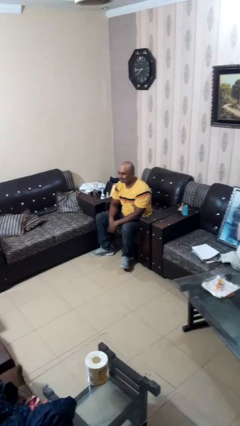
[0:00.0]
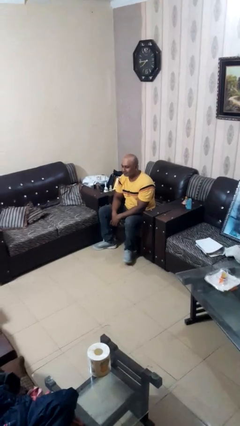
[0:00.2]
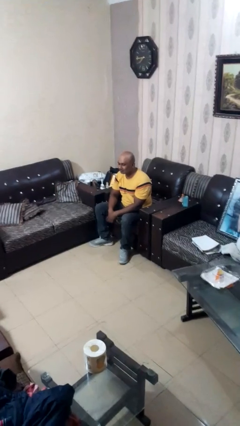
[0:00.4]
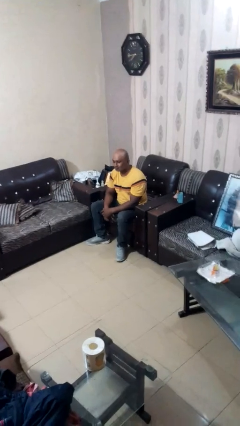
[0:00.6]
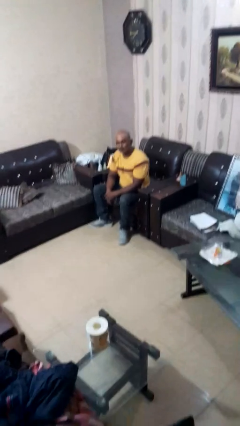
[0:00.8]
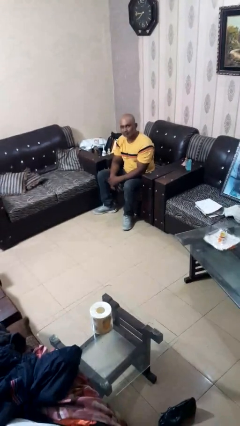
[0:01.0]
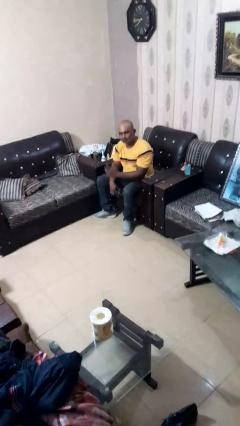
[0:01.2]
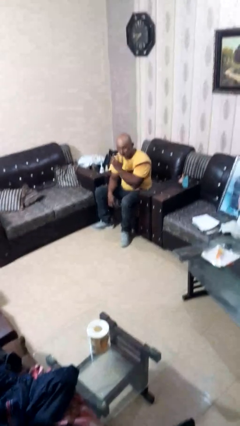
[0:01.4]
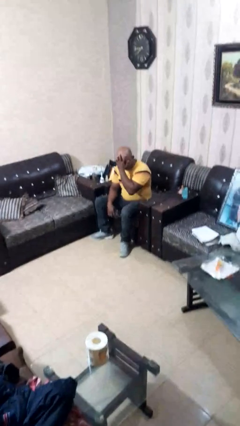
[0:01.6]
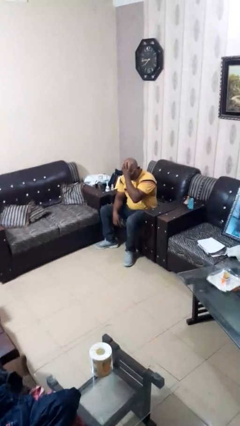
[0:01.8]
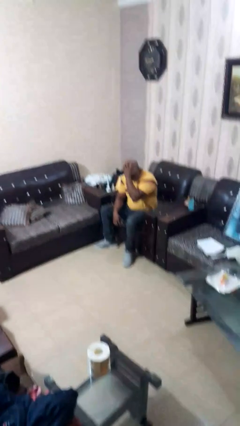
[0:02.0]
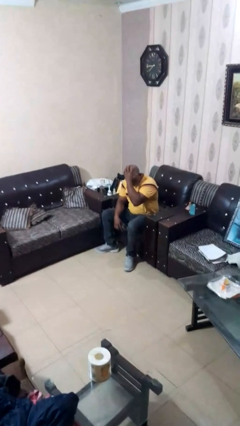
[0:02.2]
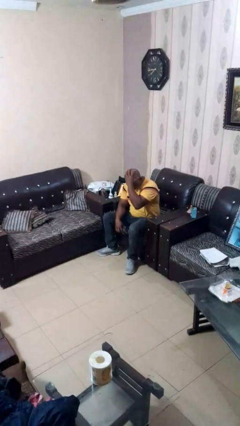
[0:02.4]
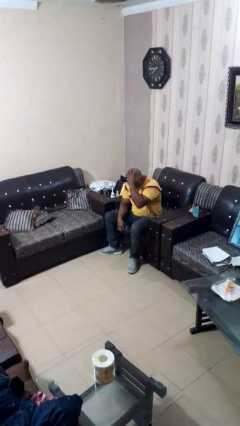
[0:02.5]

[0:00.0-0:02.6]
person strokes hair

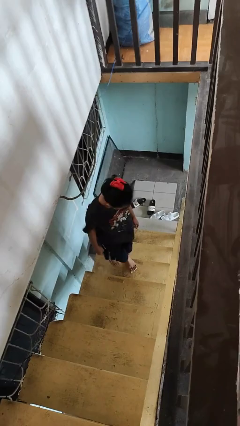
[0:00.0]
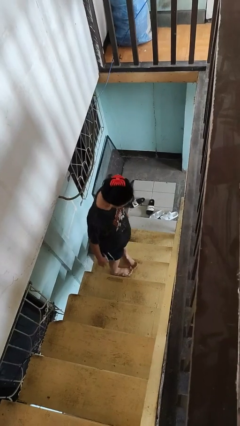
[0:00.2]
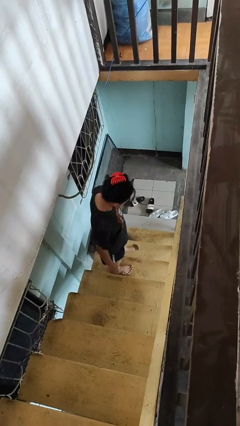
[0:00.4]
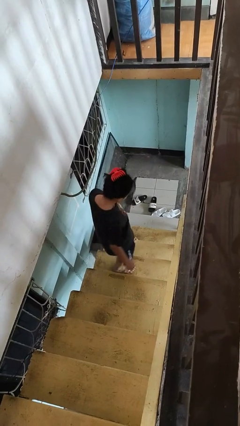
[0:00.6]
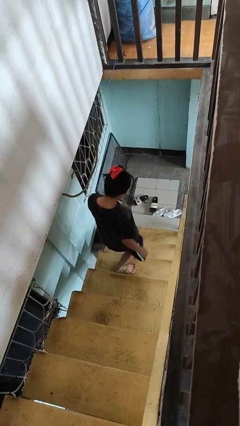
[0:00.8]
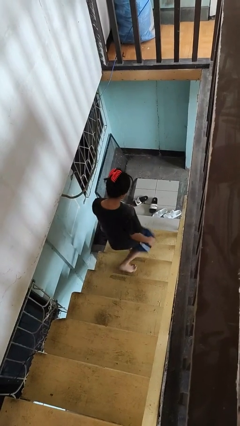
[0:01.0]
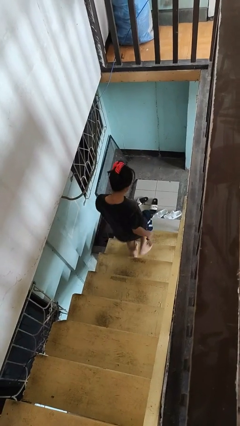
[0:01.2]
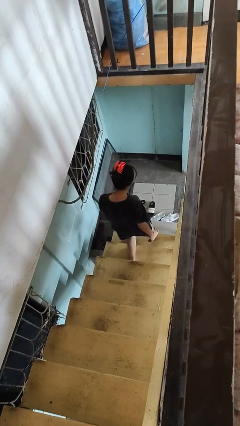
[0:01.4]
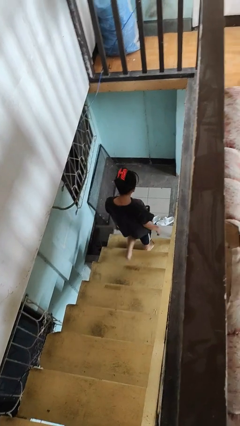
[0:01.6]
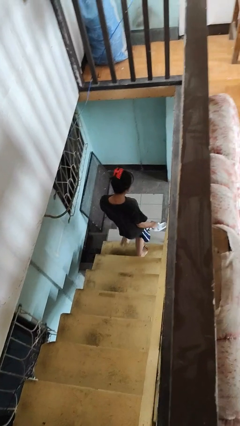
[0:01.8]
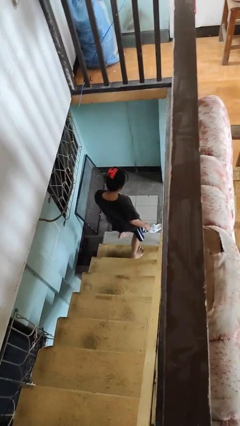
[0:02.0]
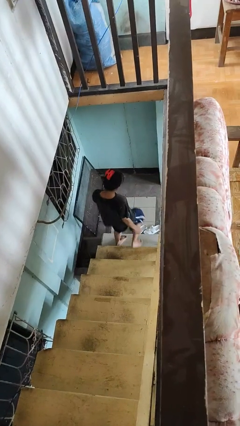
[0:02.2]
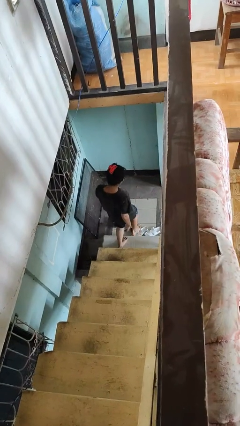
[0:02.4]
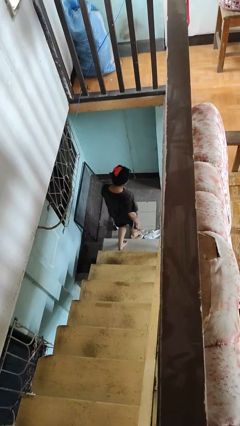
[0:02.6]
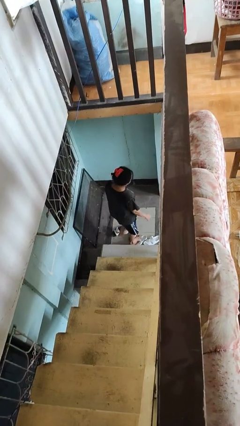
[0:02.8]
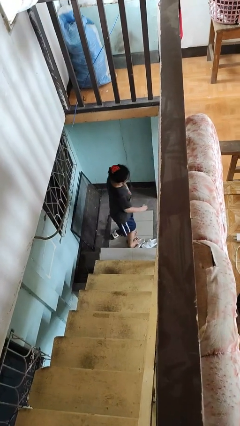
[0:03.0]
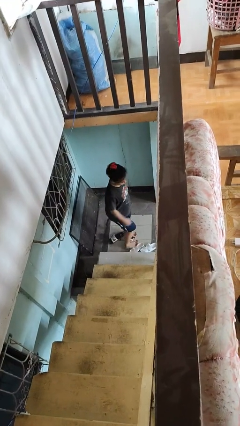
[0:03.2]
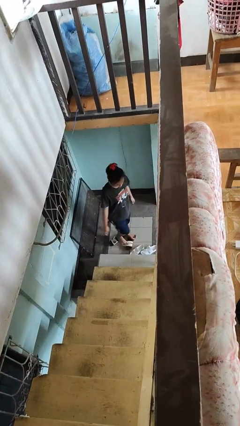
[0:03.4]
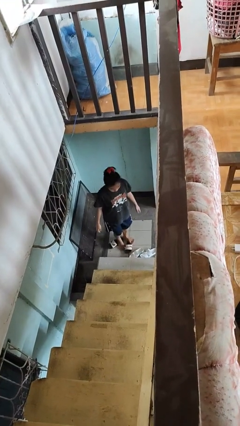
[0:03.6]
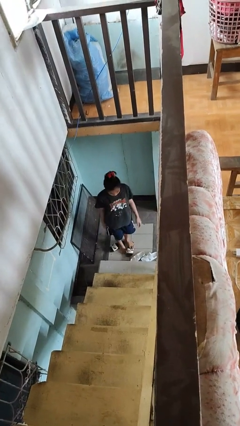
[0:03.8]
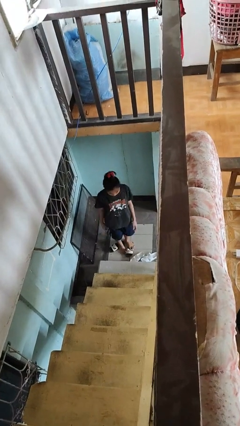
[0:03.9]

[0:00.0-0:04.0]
person climbs down stairs

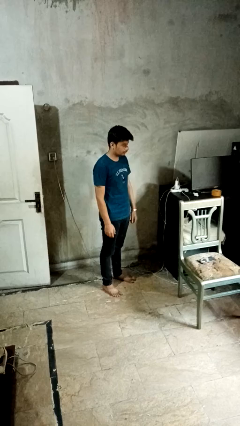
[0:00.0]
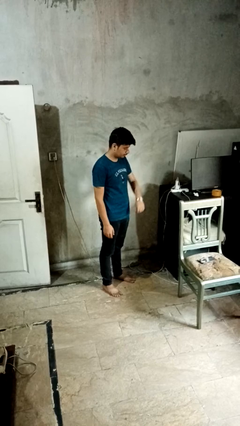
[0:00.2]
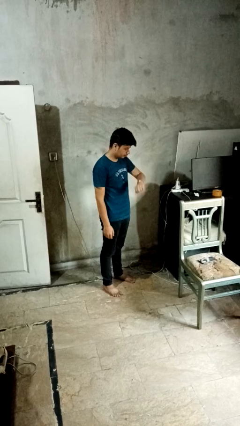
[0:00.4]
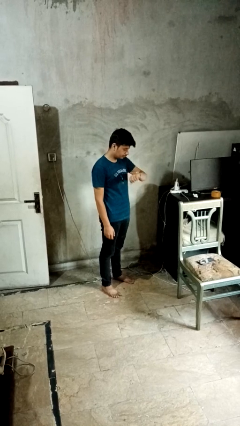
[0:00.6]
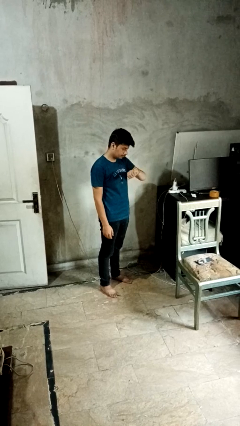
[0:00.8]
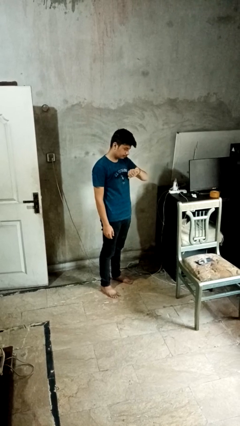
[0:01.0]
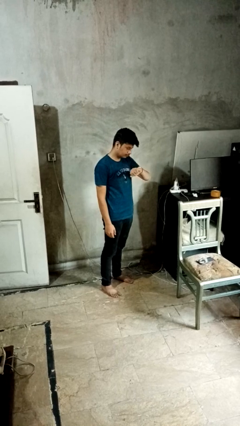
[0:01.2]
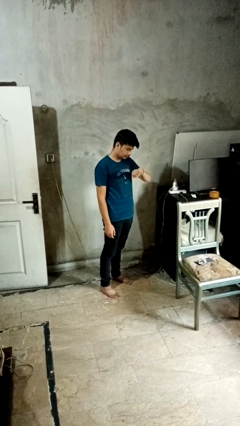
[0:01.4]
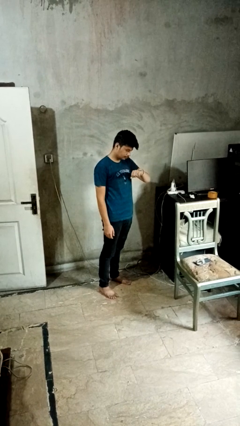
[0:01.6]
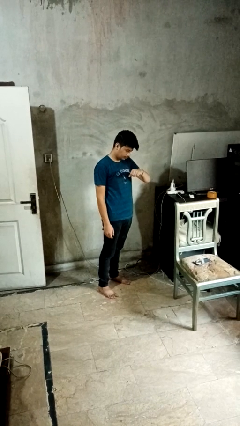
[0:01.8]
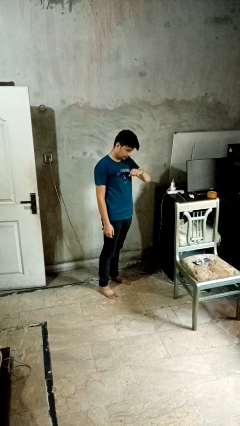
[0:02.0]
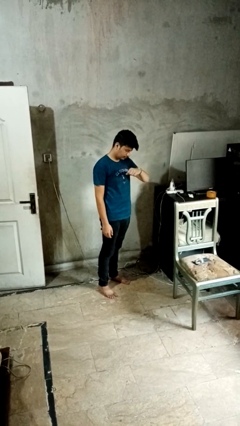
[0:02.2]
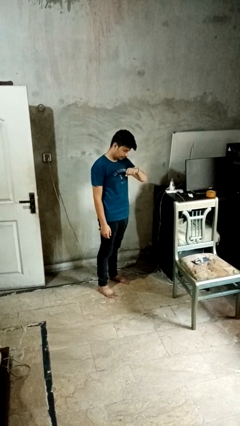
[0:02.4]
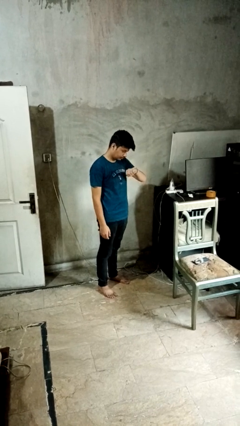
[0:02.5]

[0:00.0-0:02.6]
person looks at wristwatch

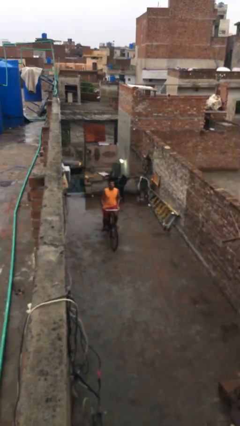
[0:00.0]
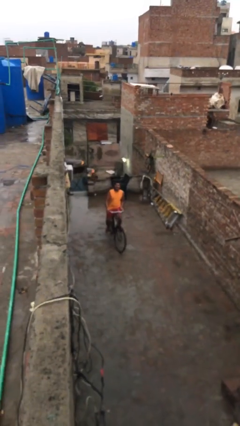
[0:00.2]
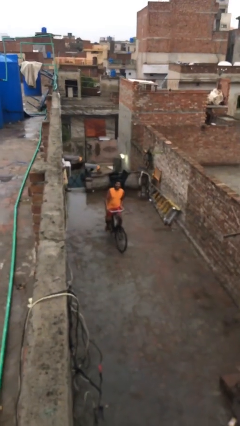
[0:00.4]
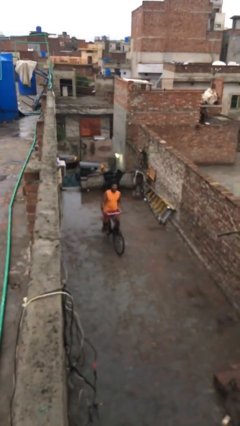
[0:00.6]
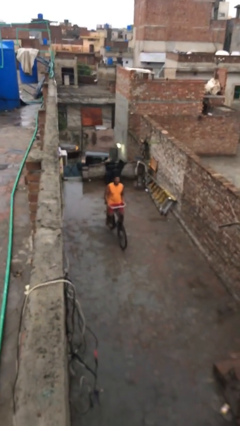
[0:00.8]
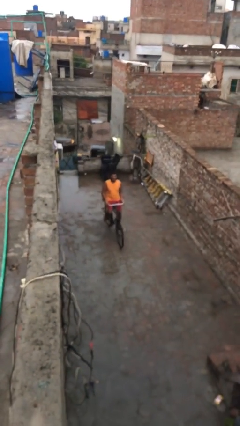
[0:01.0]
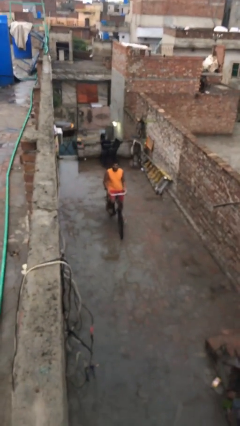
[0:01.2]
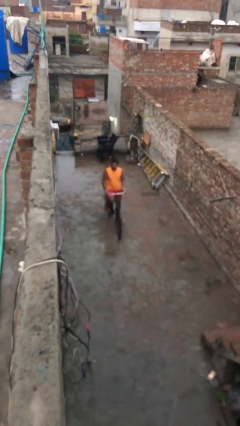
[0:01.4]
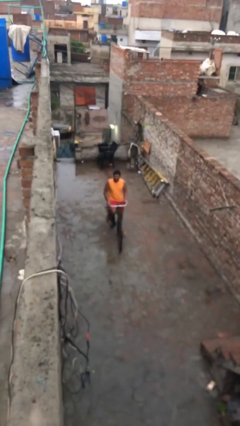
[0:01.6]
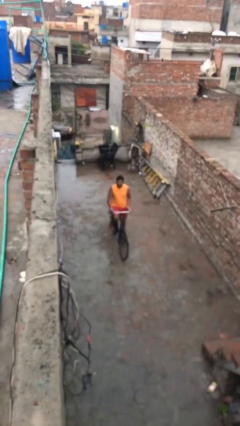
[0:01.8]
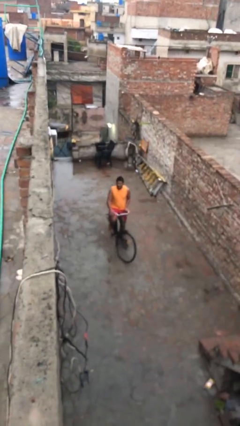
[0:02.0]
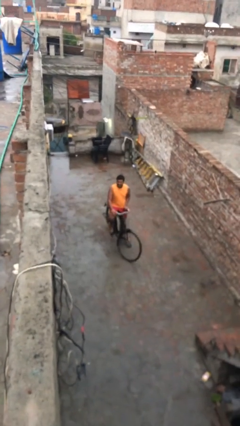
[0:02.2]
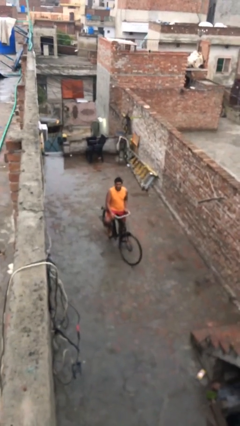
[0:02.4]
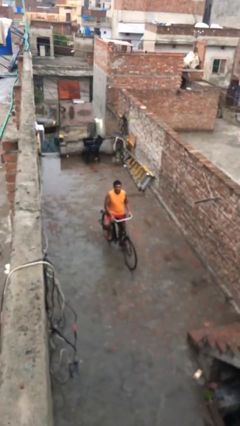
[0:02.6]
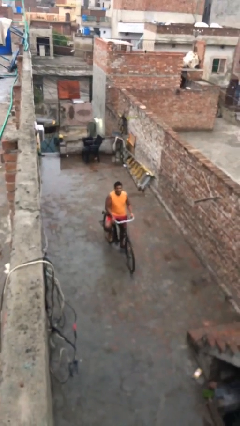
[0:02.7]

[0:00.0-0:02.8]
person rides bicycle

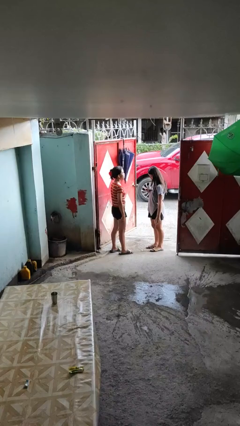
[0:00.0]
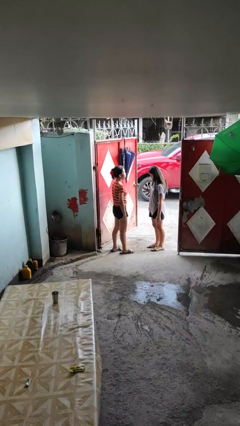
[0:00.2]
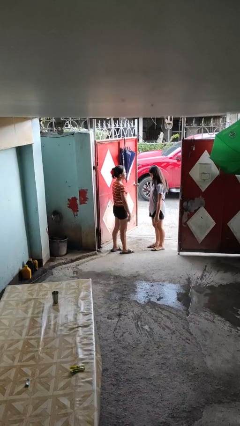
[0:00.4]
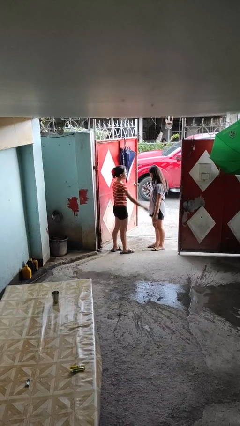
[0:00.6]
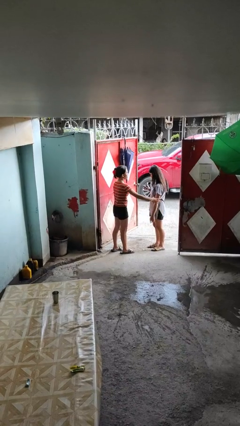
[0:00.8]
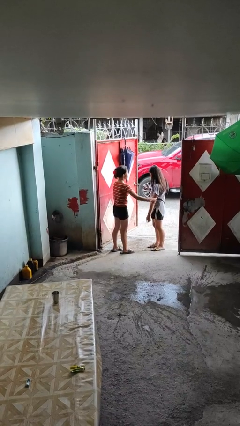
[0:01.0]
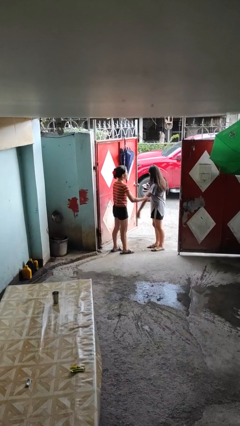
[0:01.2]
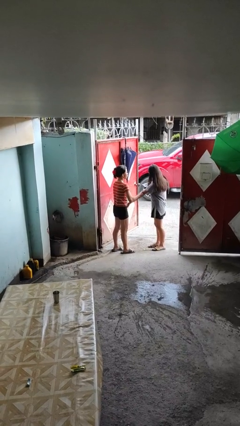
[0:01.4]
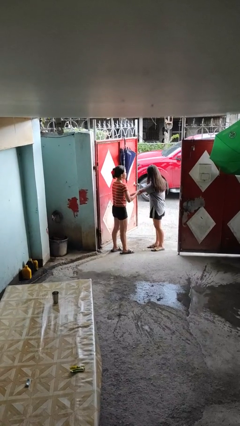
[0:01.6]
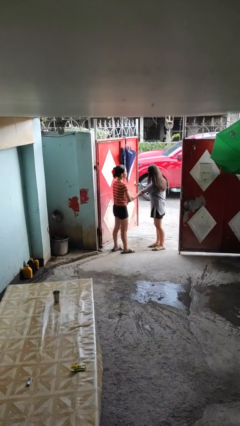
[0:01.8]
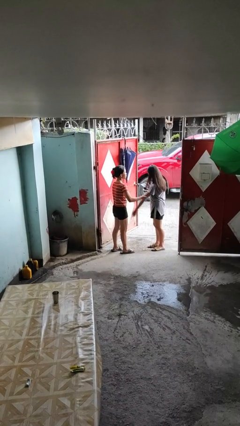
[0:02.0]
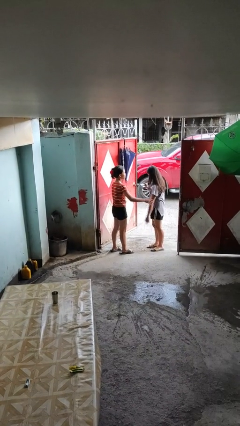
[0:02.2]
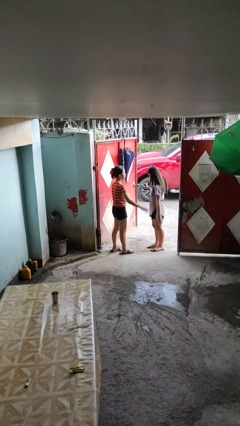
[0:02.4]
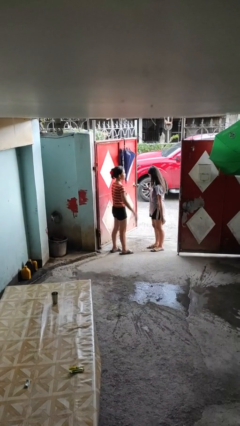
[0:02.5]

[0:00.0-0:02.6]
person grabs person by bicep

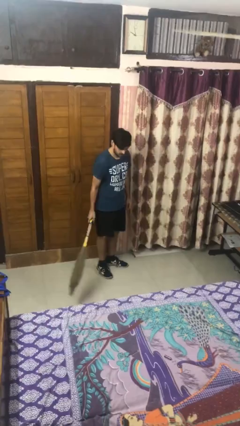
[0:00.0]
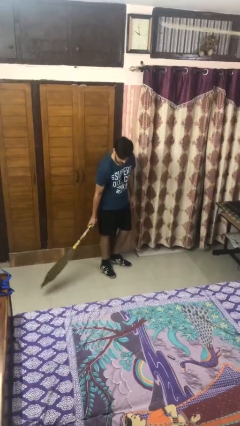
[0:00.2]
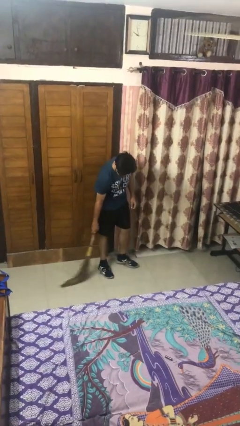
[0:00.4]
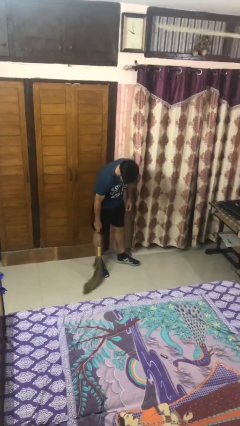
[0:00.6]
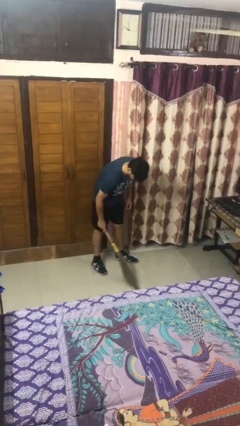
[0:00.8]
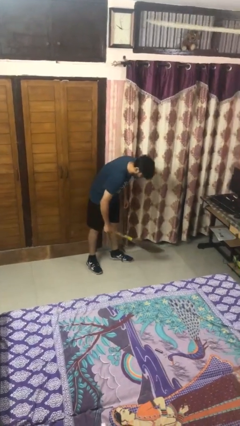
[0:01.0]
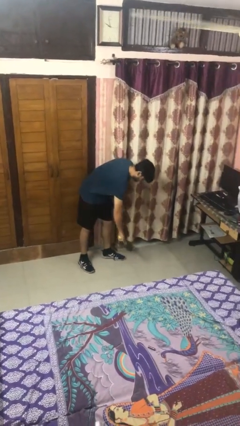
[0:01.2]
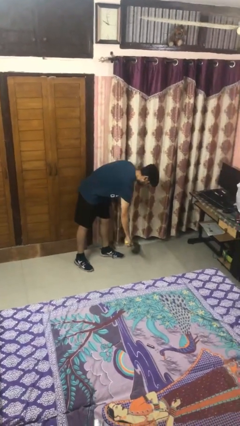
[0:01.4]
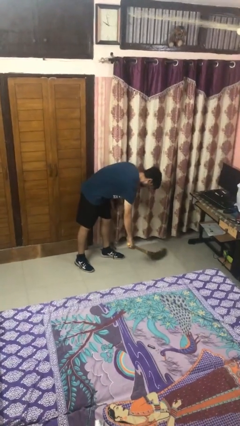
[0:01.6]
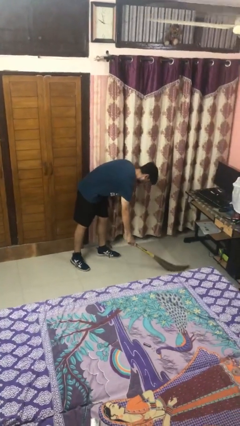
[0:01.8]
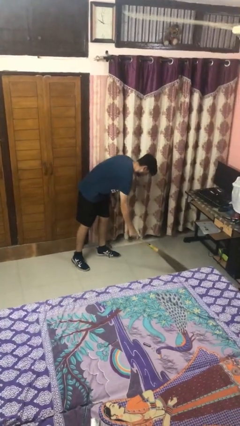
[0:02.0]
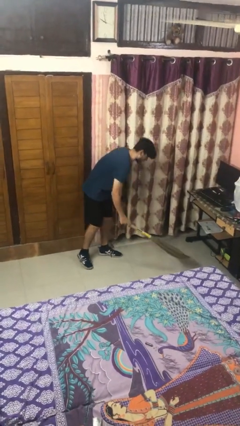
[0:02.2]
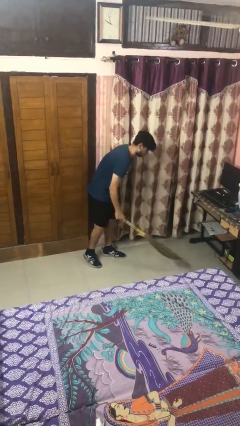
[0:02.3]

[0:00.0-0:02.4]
person sweeps floor

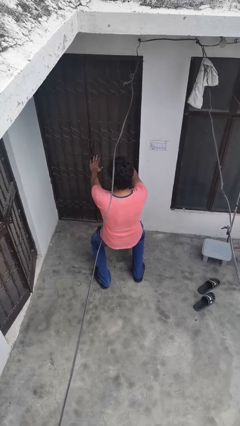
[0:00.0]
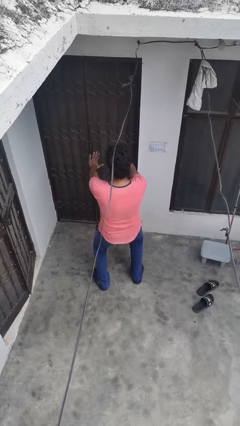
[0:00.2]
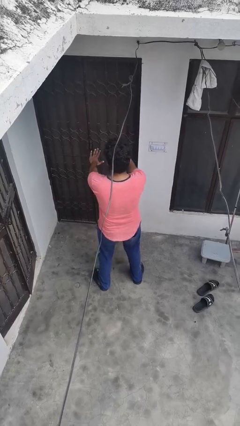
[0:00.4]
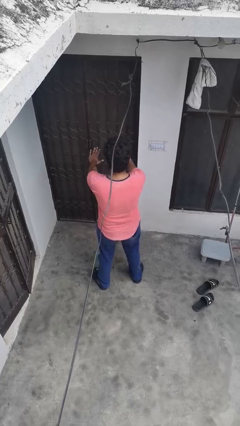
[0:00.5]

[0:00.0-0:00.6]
person stands up
